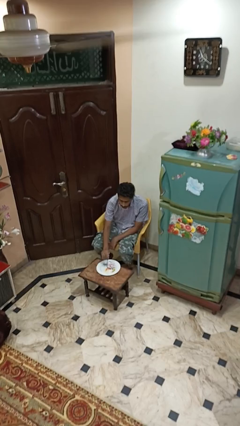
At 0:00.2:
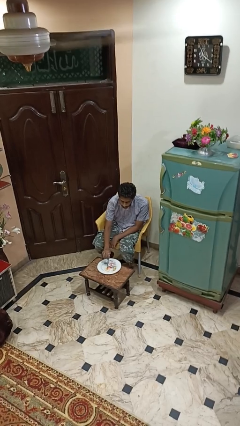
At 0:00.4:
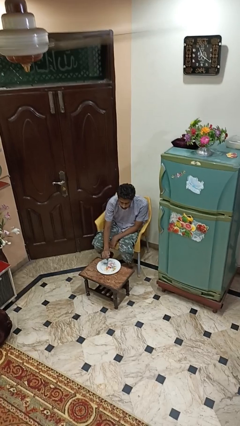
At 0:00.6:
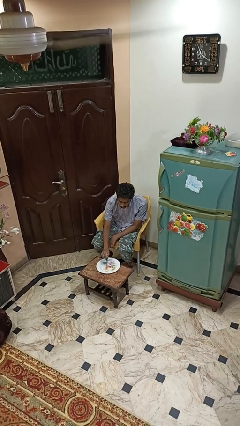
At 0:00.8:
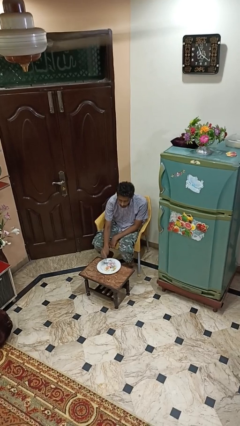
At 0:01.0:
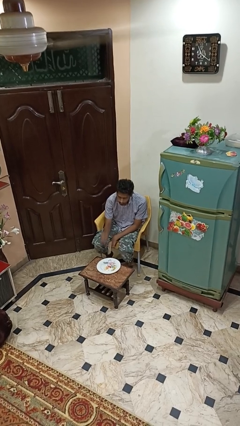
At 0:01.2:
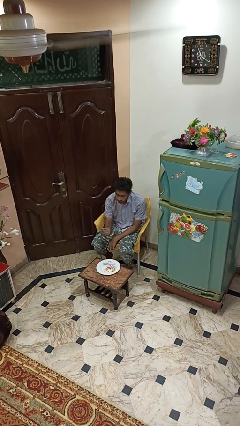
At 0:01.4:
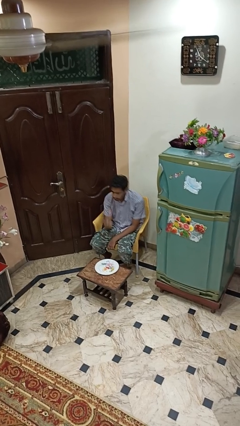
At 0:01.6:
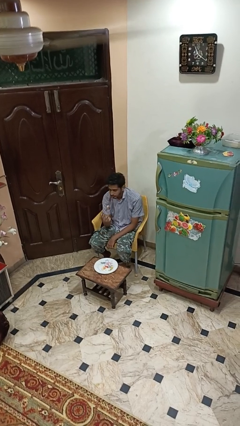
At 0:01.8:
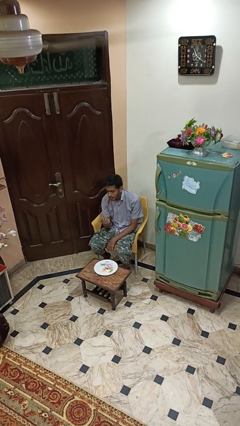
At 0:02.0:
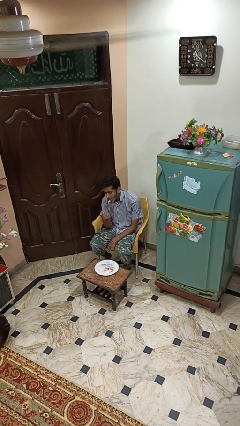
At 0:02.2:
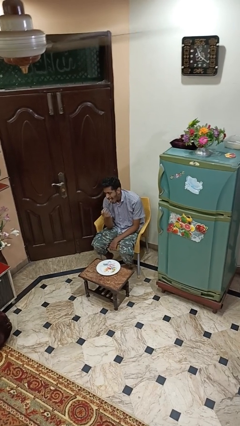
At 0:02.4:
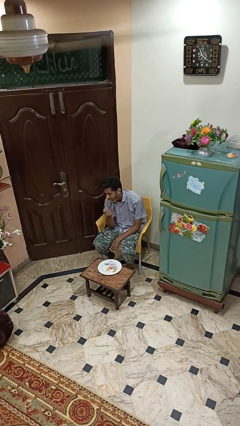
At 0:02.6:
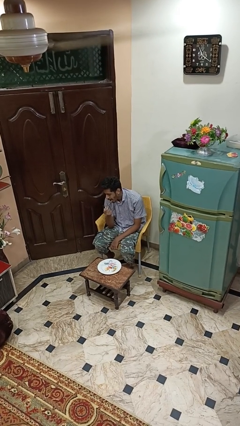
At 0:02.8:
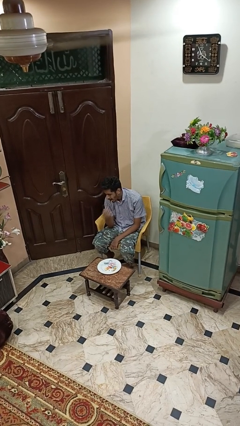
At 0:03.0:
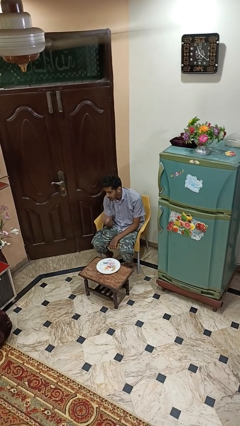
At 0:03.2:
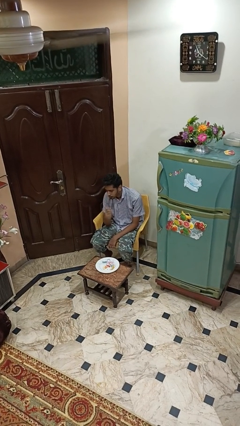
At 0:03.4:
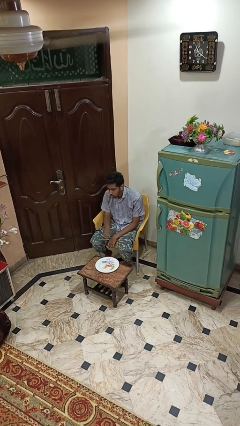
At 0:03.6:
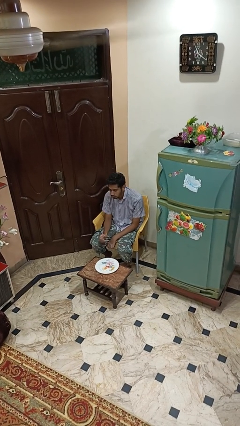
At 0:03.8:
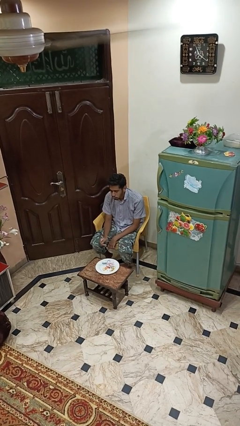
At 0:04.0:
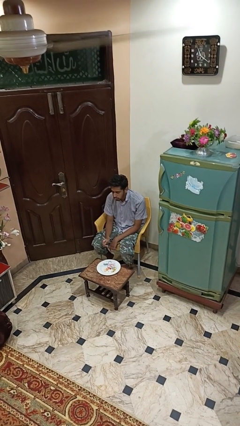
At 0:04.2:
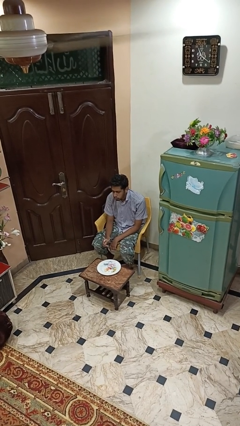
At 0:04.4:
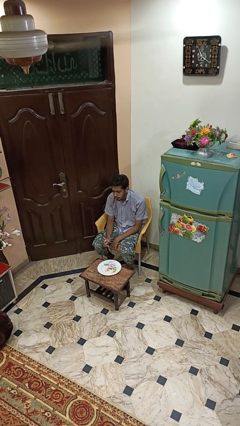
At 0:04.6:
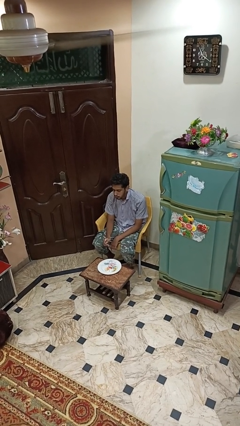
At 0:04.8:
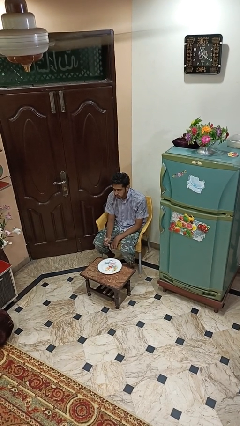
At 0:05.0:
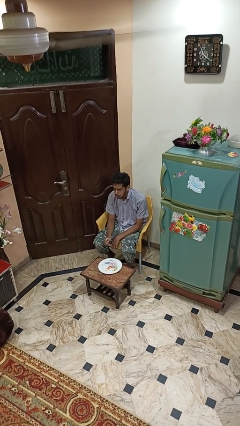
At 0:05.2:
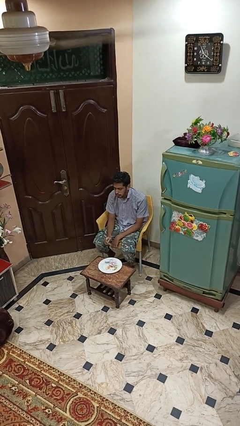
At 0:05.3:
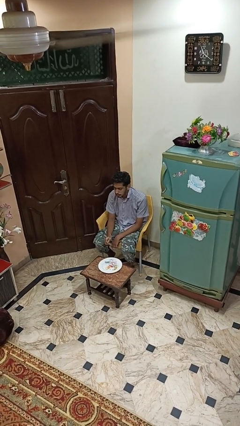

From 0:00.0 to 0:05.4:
person eats with utensil

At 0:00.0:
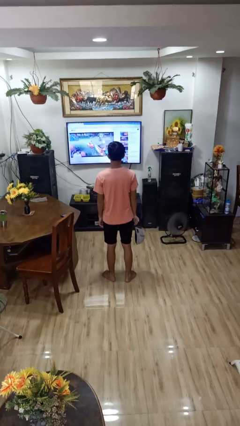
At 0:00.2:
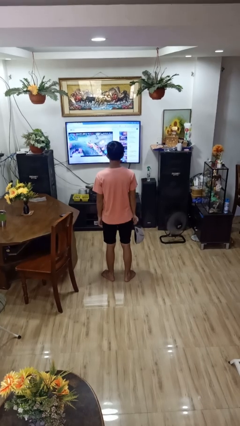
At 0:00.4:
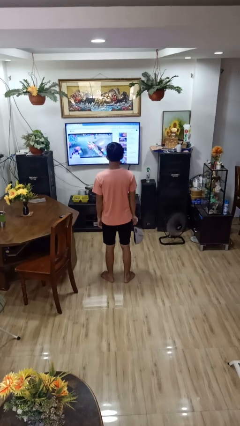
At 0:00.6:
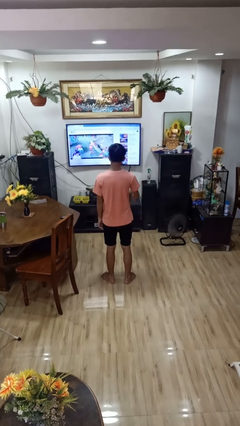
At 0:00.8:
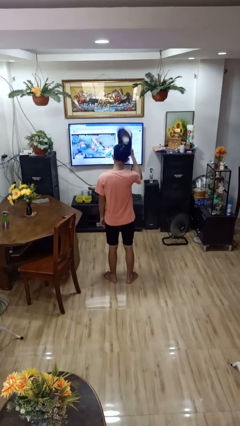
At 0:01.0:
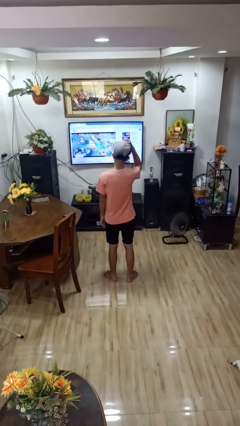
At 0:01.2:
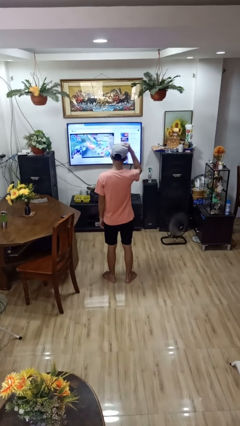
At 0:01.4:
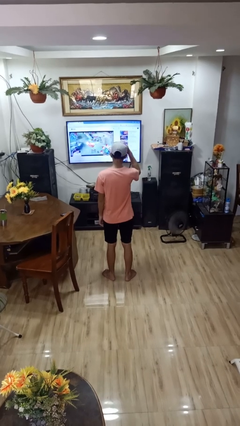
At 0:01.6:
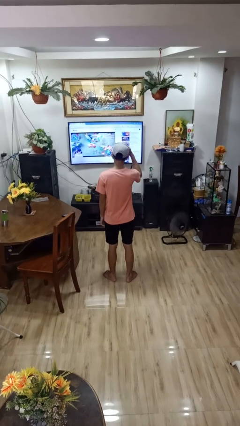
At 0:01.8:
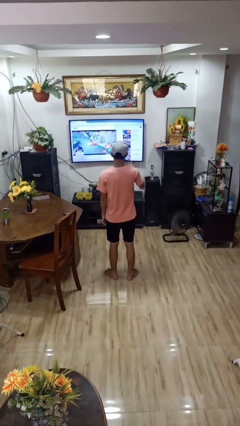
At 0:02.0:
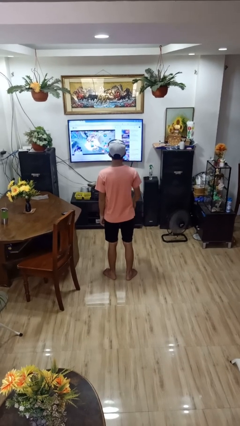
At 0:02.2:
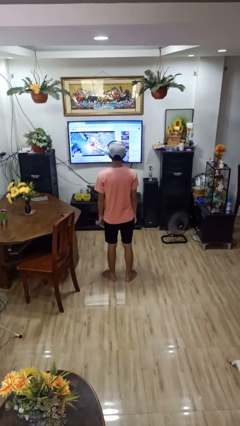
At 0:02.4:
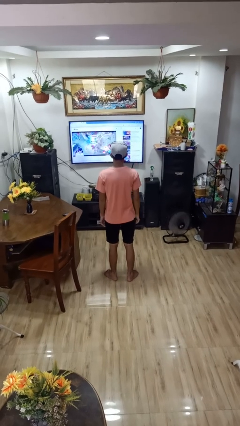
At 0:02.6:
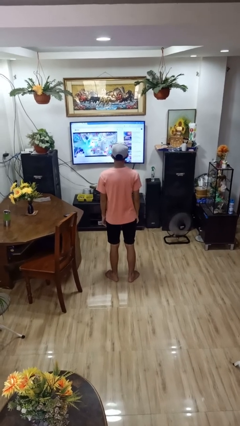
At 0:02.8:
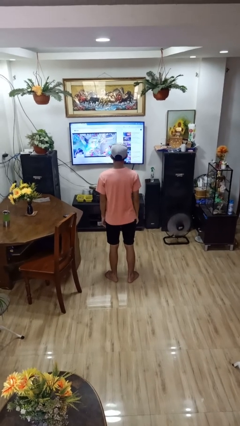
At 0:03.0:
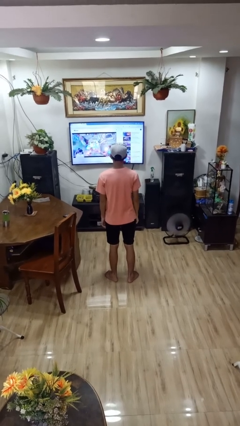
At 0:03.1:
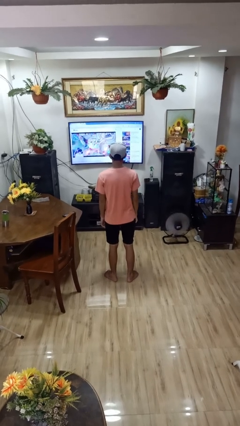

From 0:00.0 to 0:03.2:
person puts on hat

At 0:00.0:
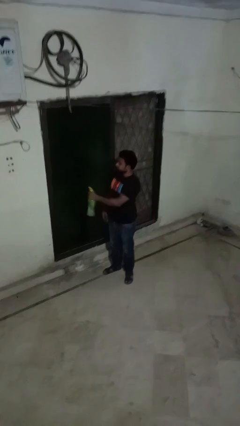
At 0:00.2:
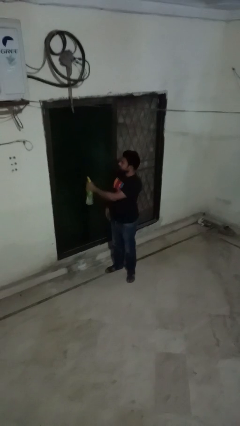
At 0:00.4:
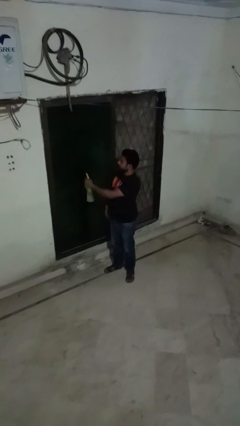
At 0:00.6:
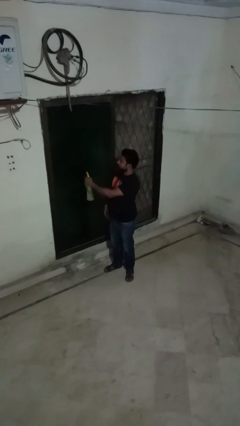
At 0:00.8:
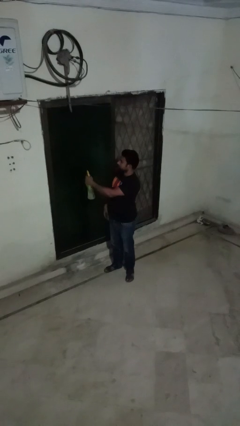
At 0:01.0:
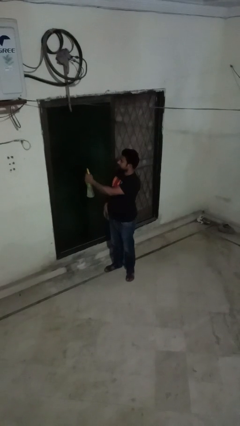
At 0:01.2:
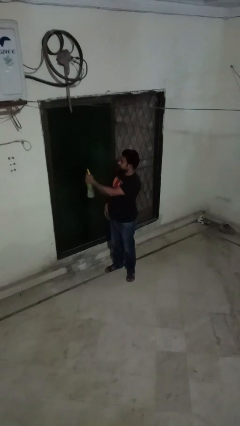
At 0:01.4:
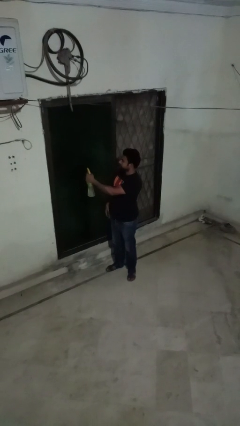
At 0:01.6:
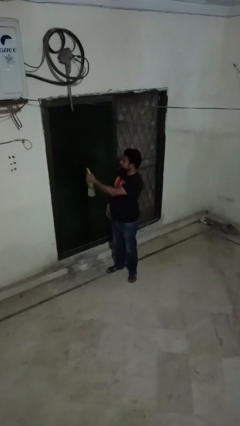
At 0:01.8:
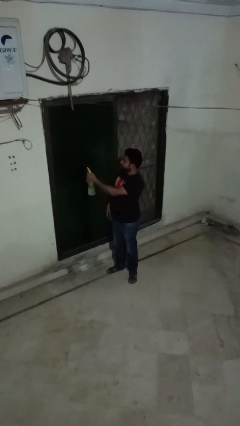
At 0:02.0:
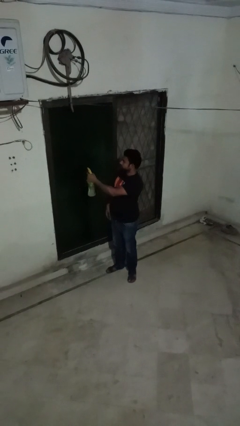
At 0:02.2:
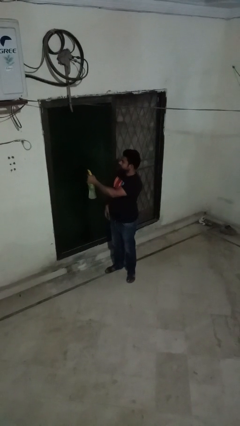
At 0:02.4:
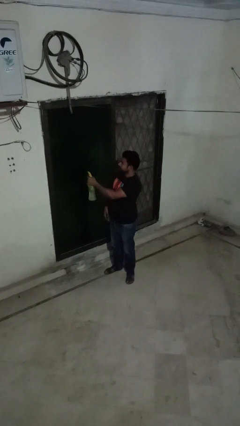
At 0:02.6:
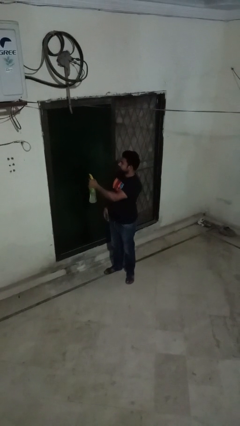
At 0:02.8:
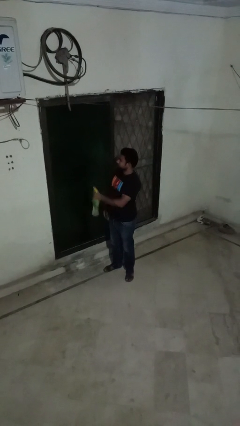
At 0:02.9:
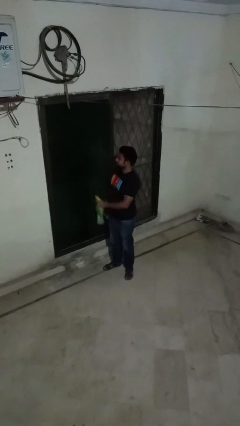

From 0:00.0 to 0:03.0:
person sprays from bottle

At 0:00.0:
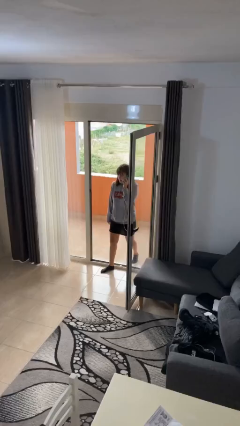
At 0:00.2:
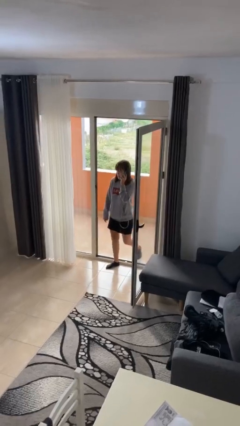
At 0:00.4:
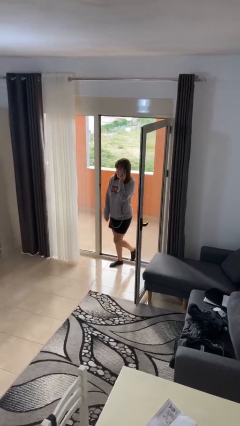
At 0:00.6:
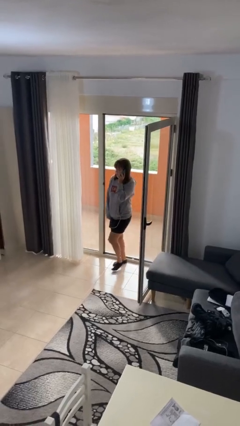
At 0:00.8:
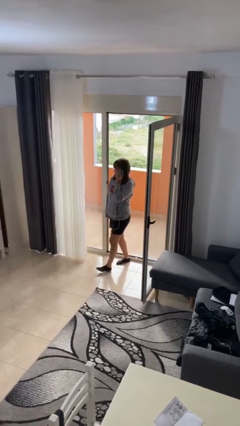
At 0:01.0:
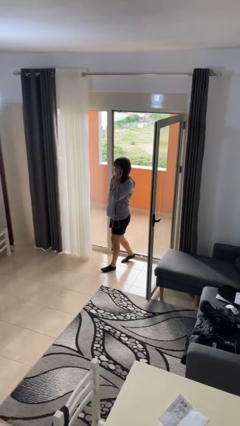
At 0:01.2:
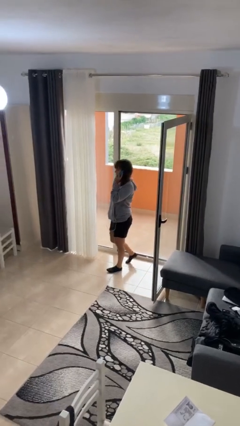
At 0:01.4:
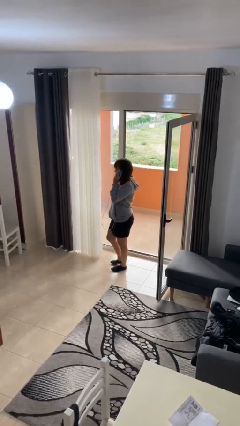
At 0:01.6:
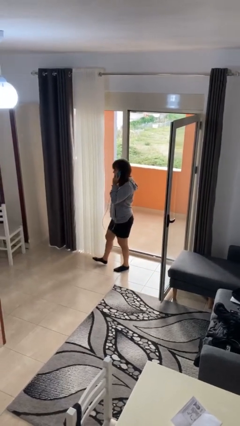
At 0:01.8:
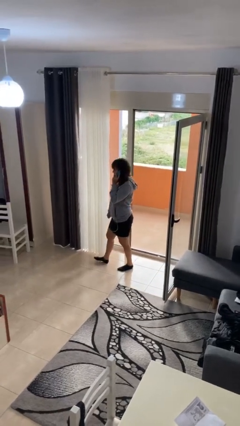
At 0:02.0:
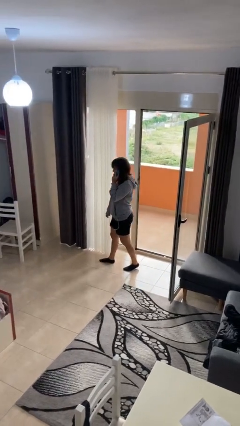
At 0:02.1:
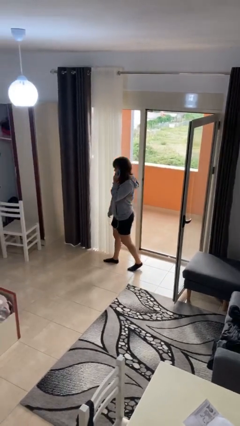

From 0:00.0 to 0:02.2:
person enters scene through structure

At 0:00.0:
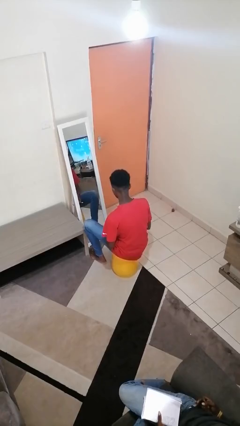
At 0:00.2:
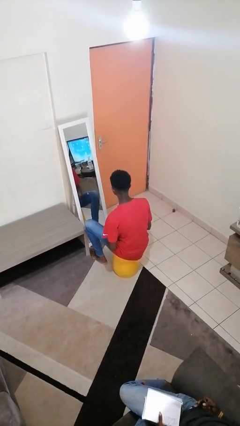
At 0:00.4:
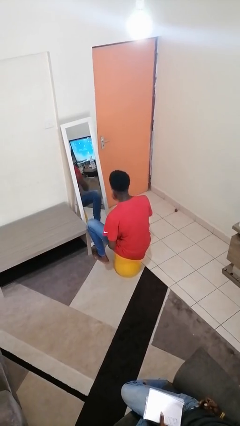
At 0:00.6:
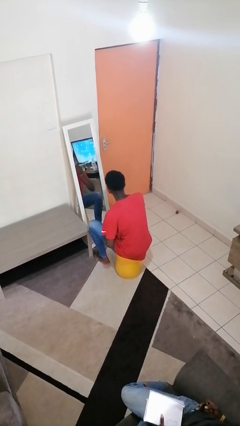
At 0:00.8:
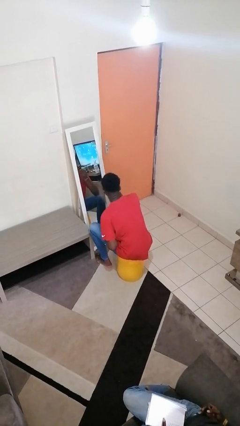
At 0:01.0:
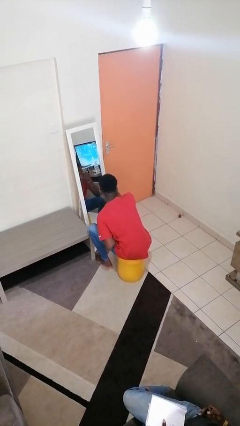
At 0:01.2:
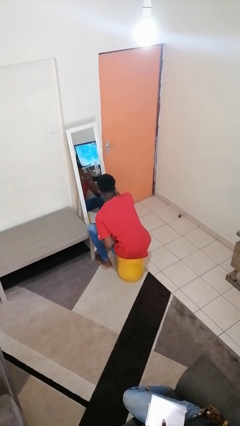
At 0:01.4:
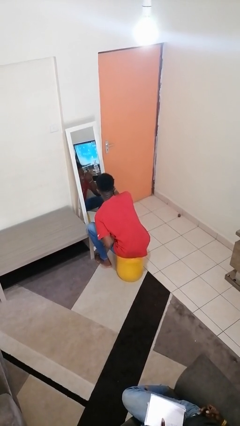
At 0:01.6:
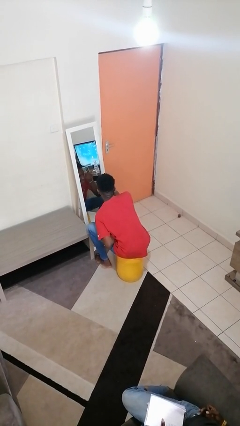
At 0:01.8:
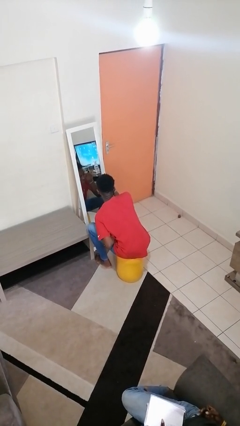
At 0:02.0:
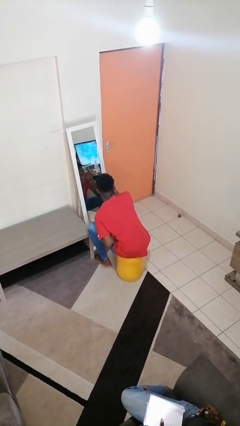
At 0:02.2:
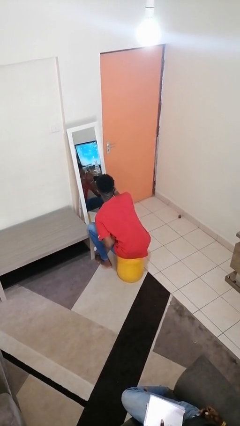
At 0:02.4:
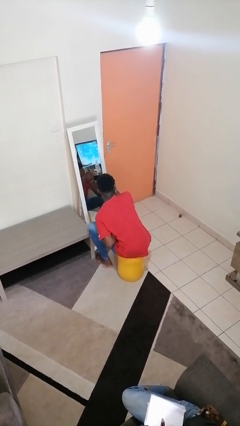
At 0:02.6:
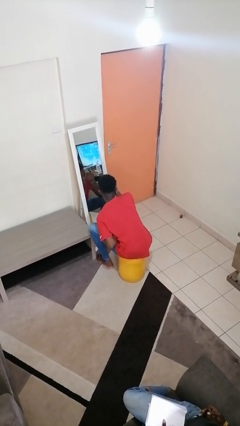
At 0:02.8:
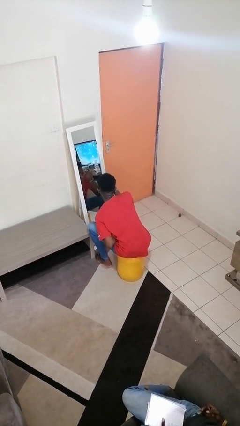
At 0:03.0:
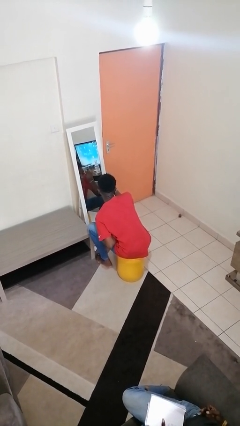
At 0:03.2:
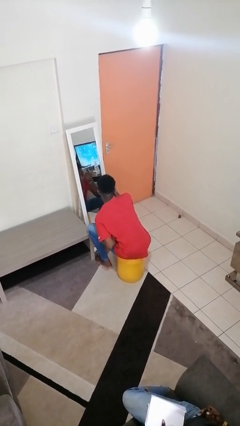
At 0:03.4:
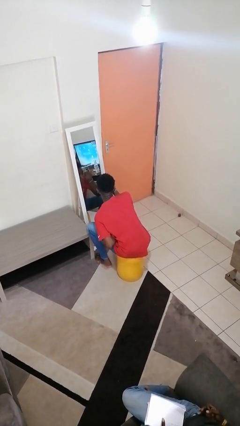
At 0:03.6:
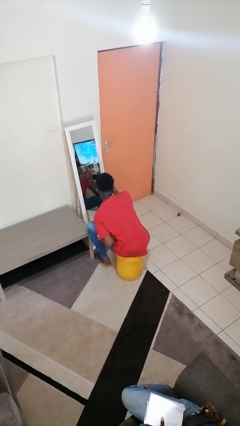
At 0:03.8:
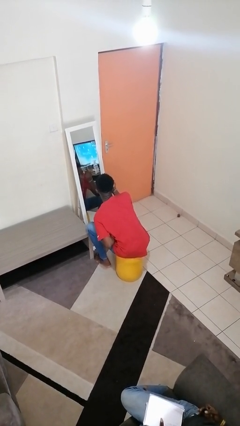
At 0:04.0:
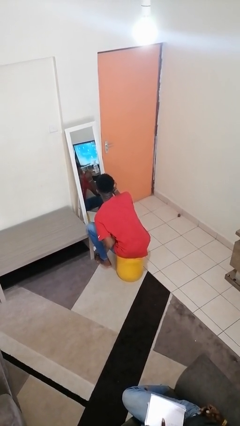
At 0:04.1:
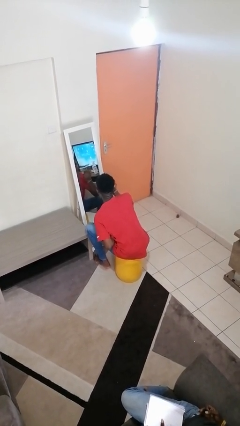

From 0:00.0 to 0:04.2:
person applies eye makeup
